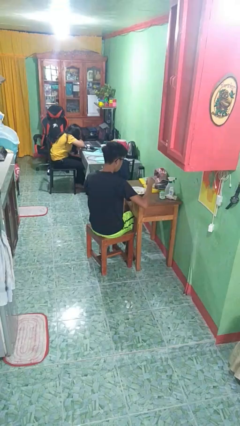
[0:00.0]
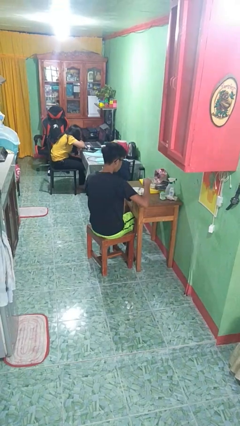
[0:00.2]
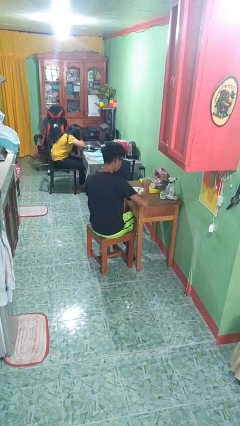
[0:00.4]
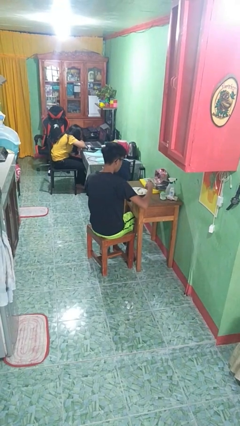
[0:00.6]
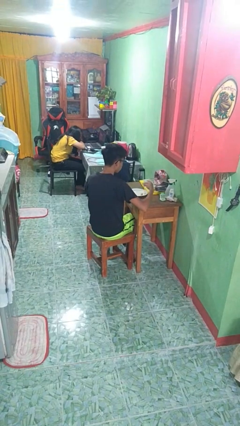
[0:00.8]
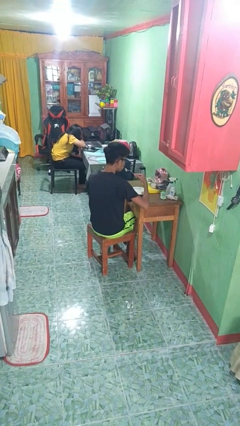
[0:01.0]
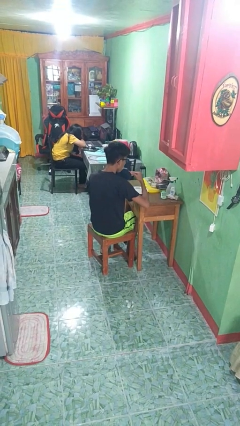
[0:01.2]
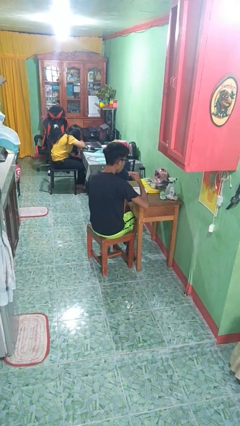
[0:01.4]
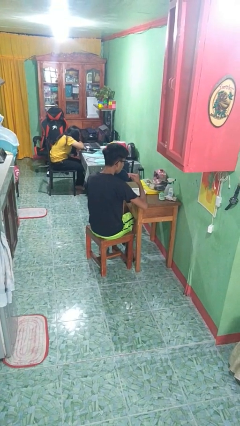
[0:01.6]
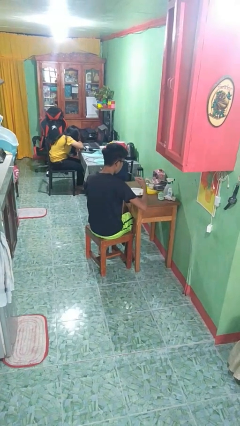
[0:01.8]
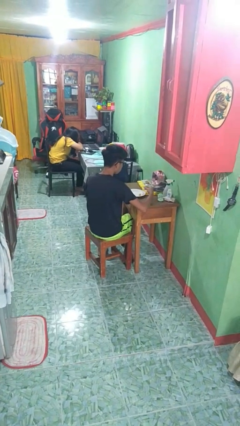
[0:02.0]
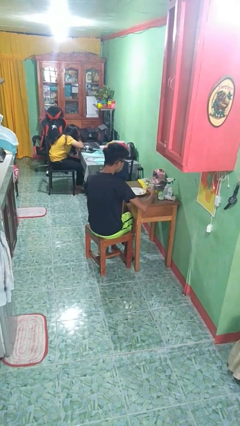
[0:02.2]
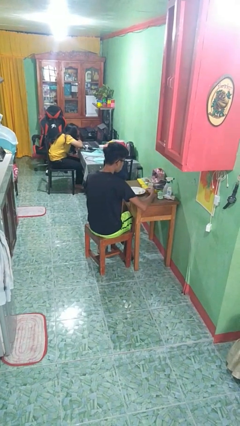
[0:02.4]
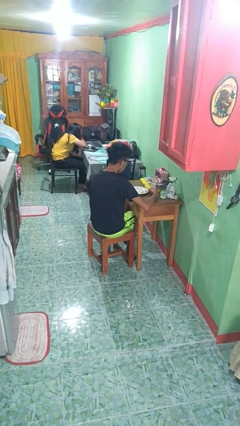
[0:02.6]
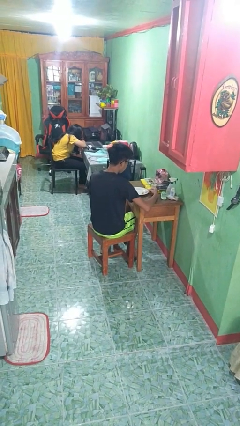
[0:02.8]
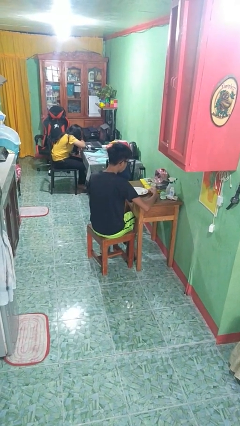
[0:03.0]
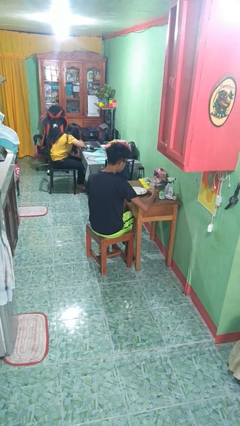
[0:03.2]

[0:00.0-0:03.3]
person eats with utensil

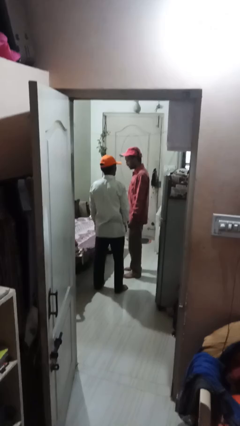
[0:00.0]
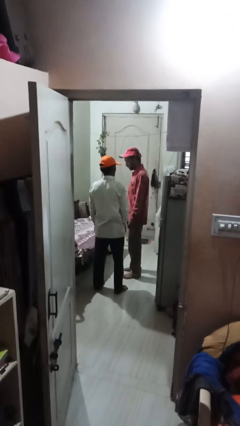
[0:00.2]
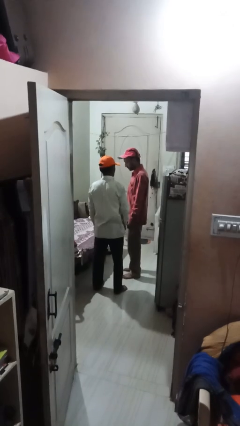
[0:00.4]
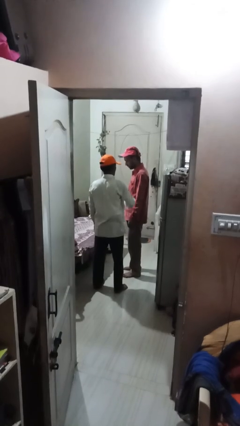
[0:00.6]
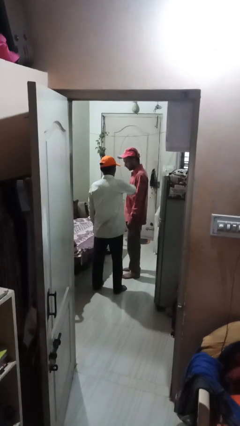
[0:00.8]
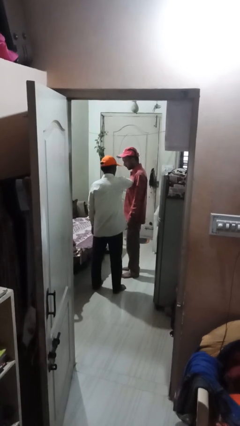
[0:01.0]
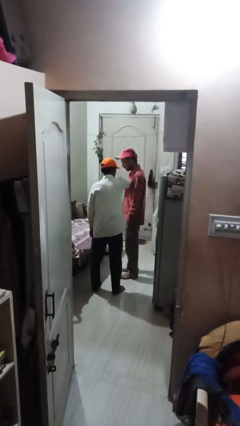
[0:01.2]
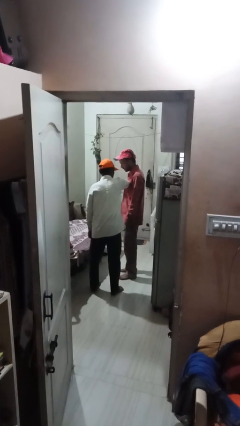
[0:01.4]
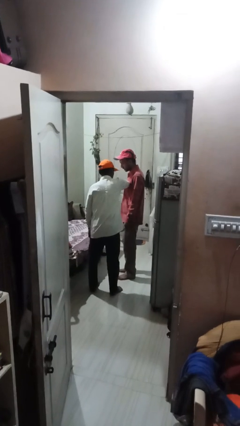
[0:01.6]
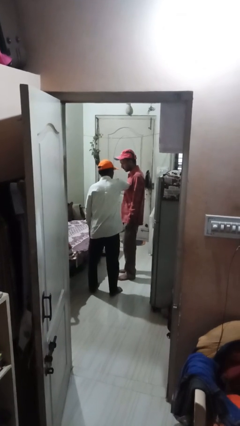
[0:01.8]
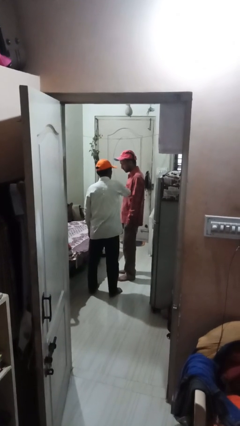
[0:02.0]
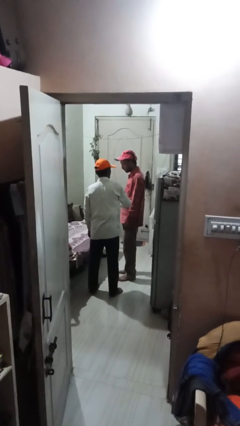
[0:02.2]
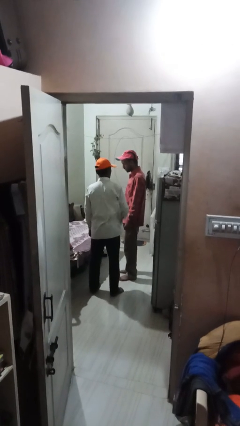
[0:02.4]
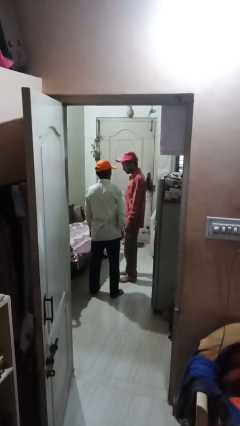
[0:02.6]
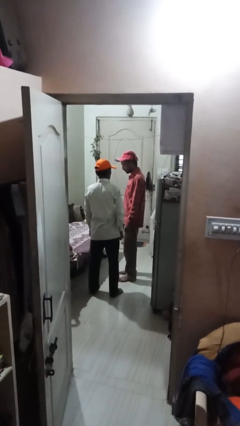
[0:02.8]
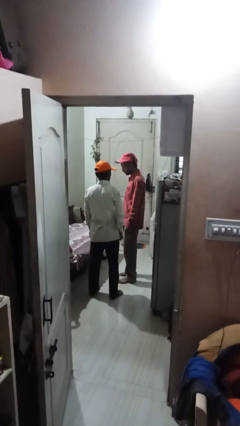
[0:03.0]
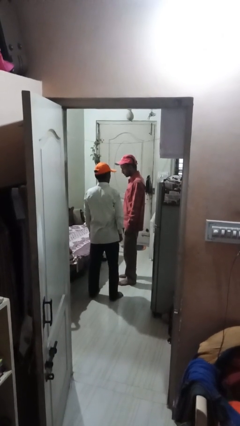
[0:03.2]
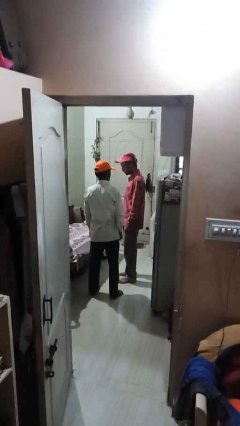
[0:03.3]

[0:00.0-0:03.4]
person nudges person with elbow

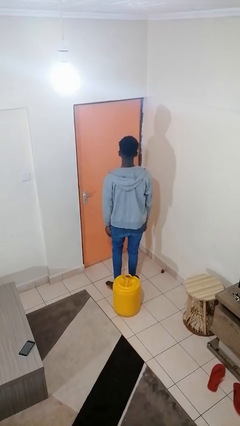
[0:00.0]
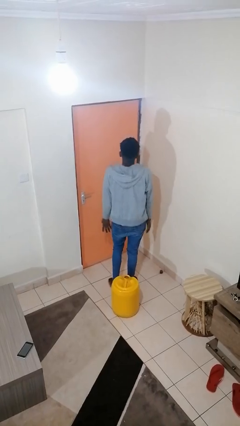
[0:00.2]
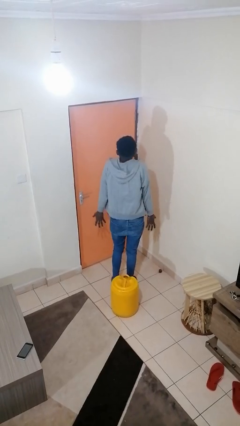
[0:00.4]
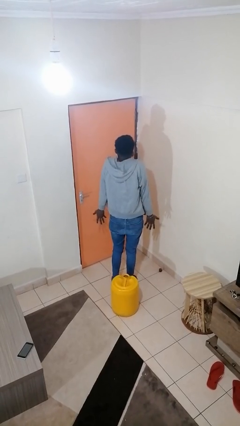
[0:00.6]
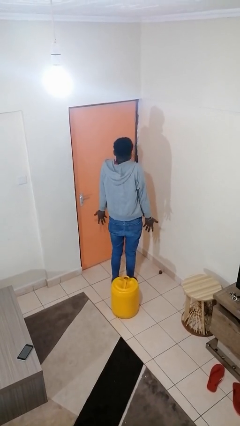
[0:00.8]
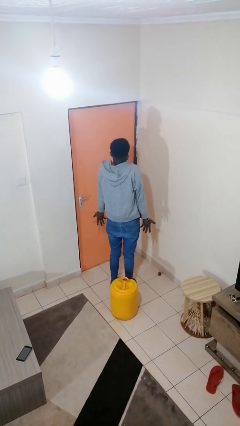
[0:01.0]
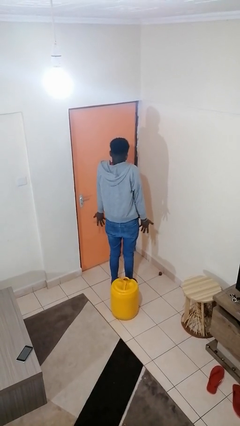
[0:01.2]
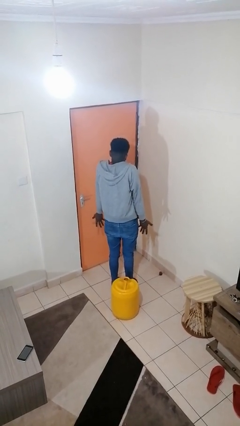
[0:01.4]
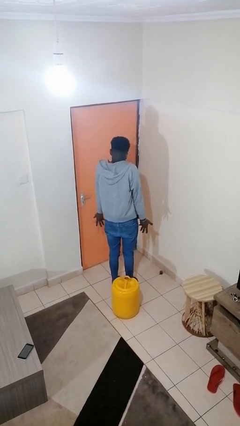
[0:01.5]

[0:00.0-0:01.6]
person shrugs

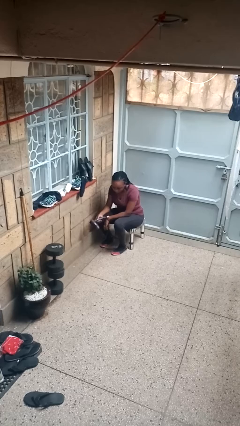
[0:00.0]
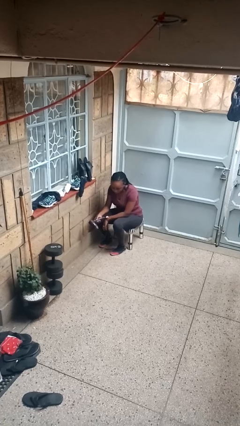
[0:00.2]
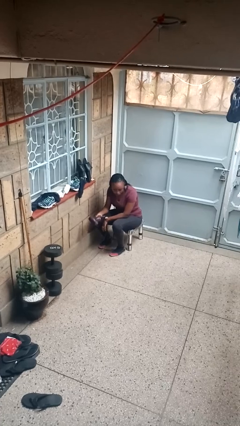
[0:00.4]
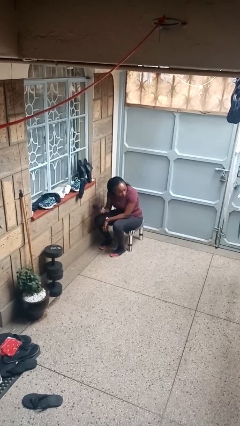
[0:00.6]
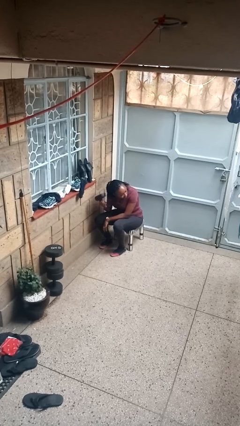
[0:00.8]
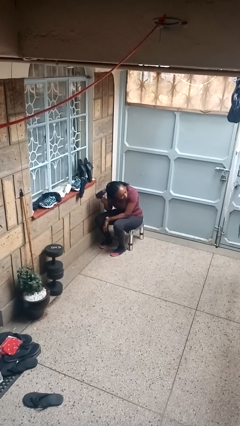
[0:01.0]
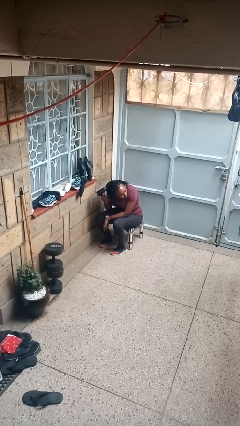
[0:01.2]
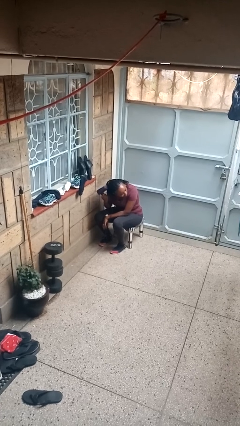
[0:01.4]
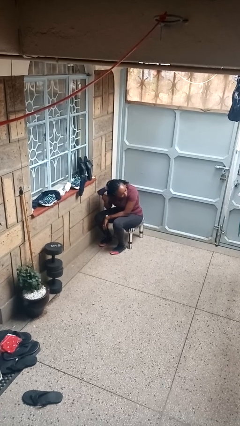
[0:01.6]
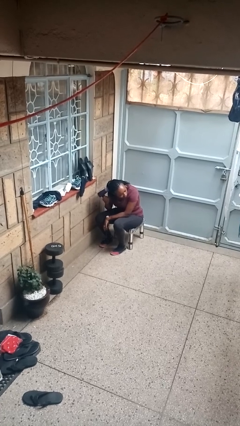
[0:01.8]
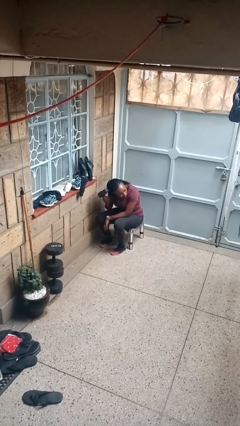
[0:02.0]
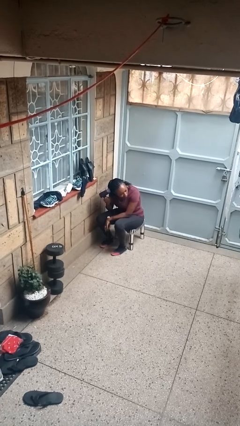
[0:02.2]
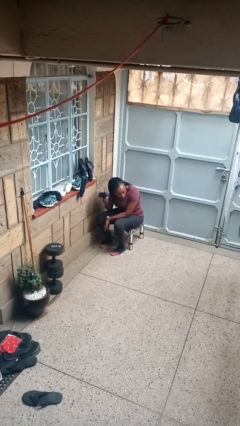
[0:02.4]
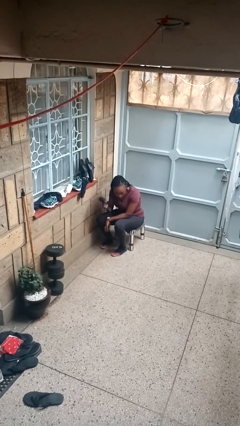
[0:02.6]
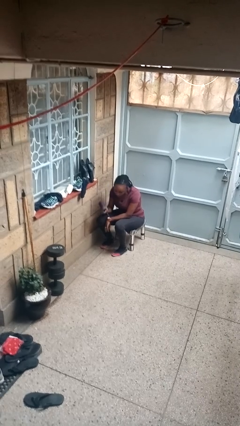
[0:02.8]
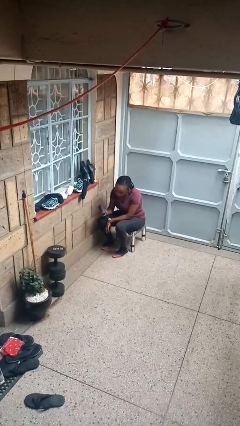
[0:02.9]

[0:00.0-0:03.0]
person dries hair with hairdryer

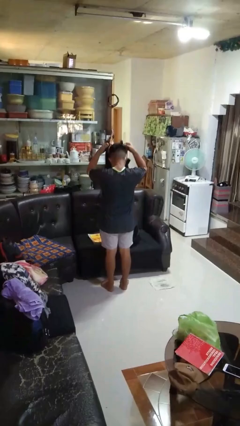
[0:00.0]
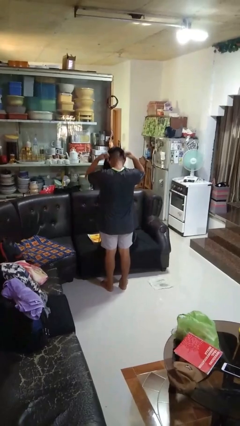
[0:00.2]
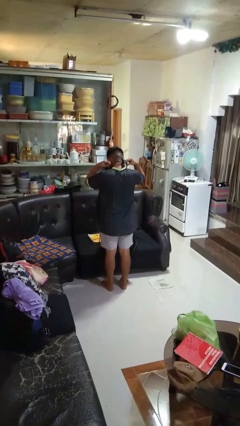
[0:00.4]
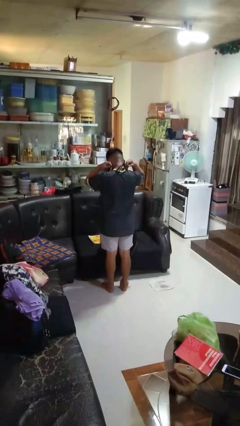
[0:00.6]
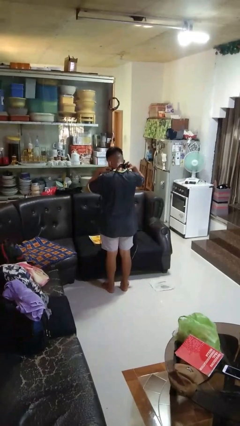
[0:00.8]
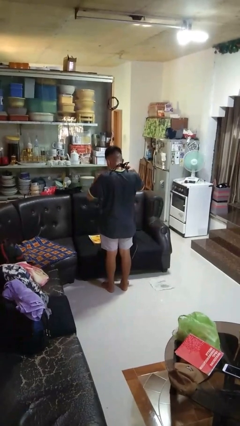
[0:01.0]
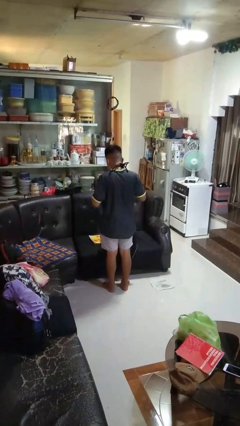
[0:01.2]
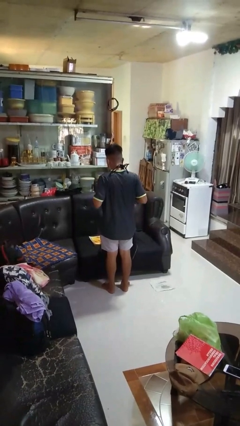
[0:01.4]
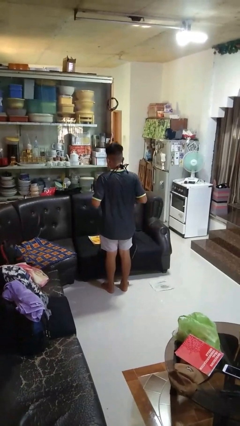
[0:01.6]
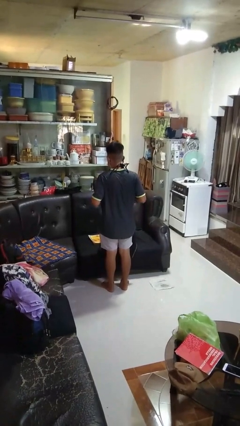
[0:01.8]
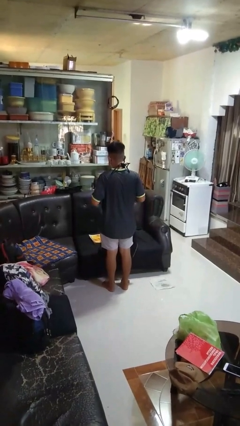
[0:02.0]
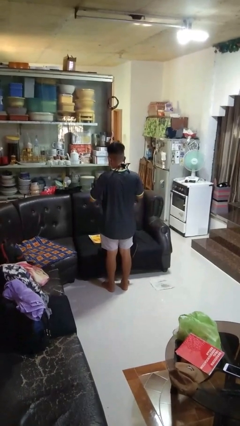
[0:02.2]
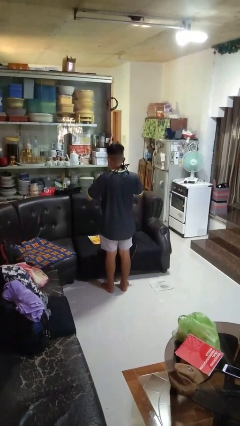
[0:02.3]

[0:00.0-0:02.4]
person puts on apron

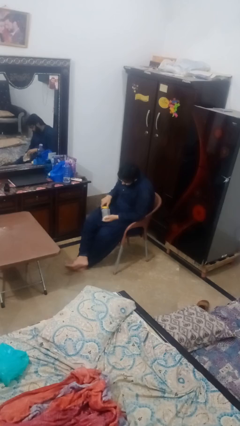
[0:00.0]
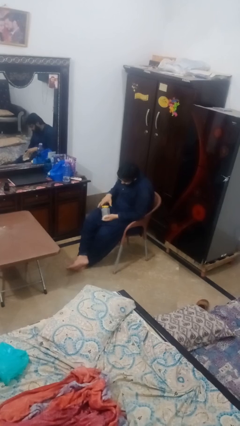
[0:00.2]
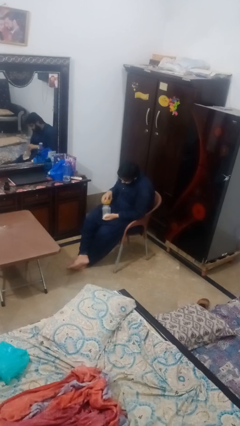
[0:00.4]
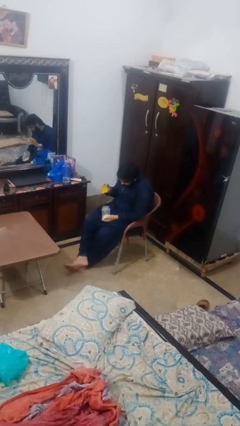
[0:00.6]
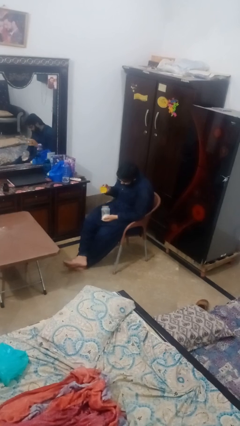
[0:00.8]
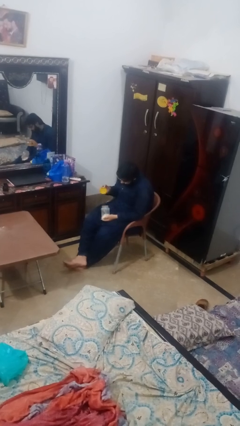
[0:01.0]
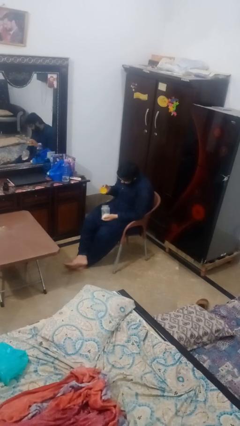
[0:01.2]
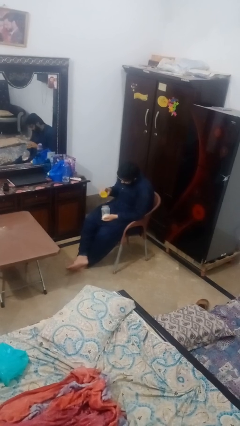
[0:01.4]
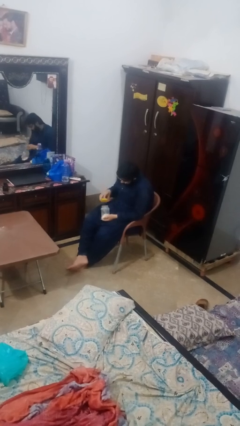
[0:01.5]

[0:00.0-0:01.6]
person opens jar

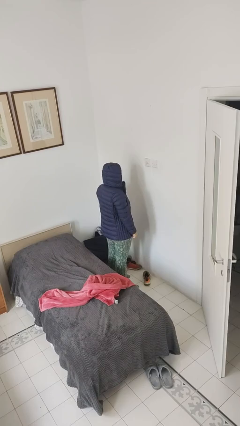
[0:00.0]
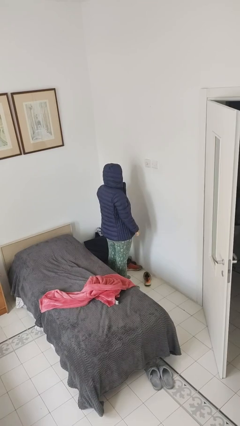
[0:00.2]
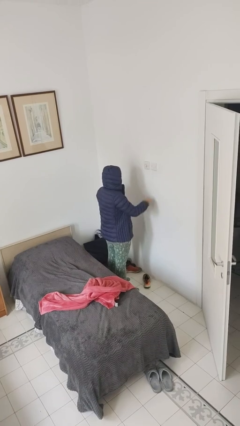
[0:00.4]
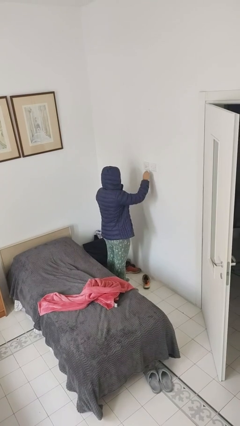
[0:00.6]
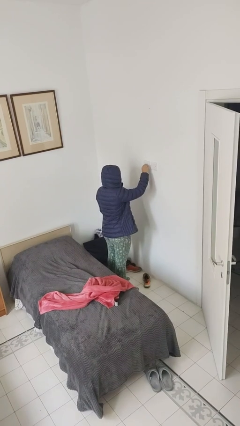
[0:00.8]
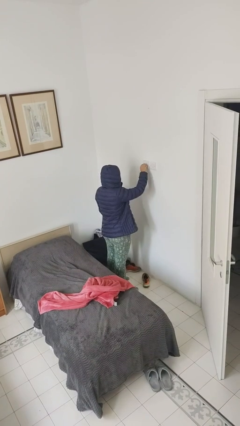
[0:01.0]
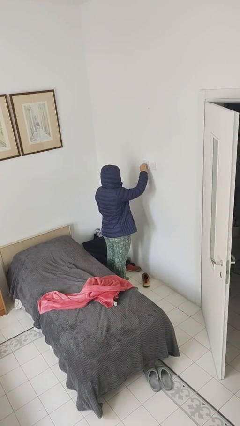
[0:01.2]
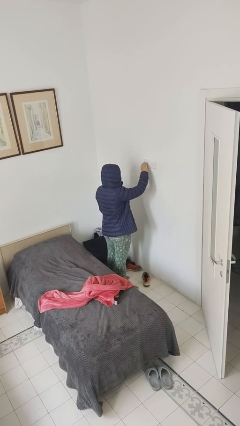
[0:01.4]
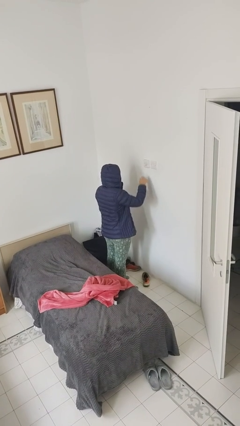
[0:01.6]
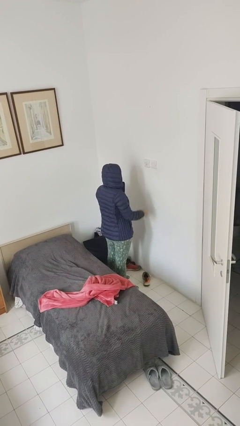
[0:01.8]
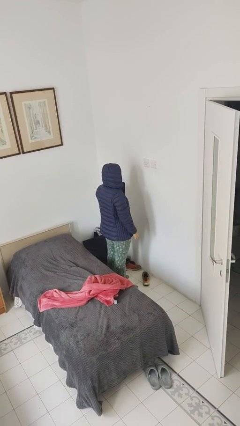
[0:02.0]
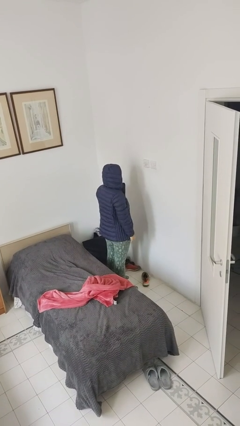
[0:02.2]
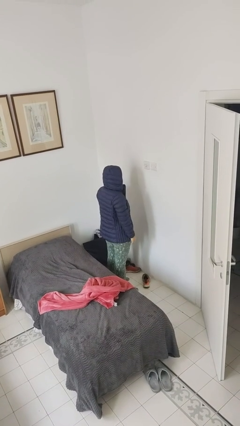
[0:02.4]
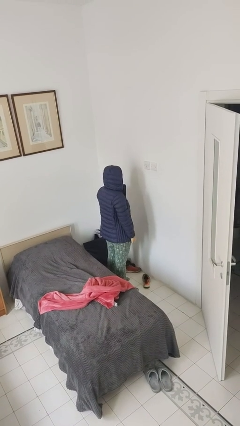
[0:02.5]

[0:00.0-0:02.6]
person turns off fan
